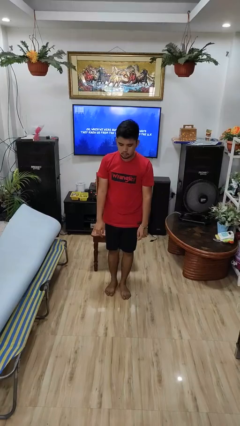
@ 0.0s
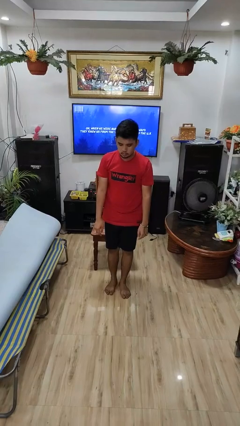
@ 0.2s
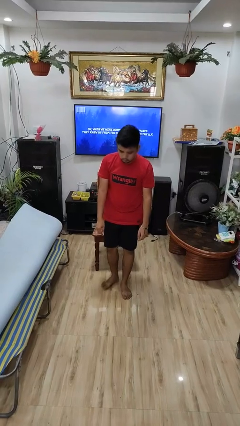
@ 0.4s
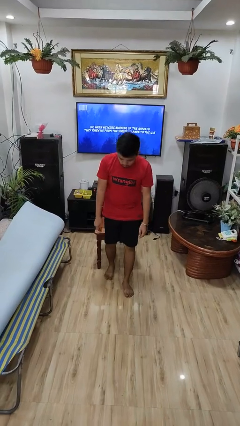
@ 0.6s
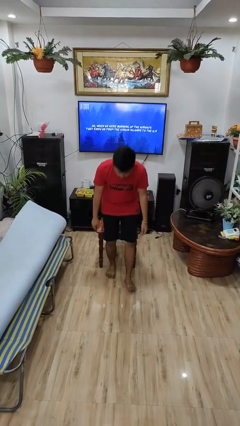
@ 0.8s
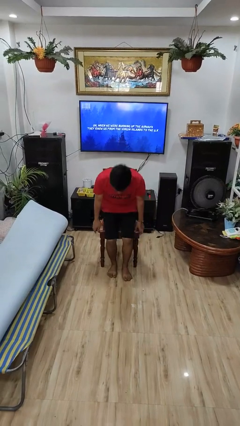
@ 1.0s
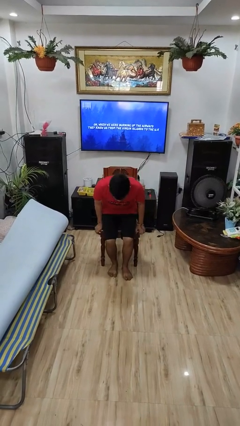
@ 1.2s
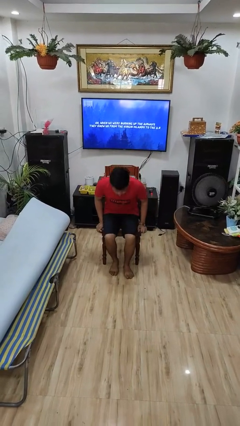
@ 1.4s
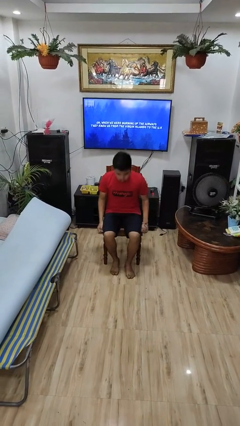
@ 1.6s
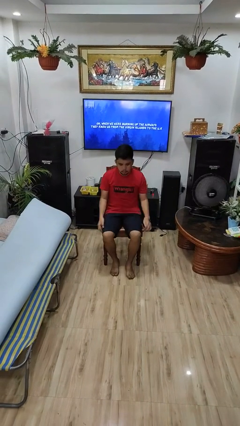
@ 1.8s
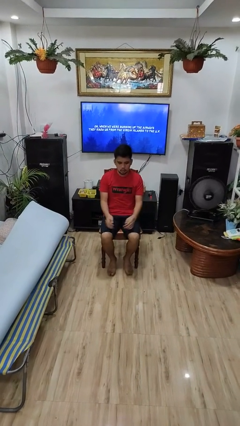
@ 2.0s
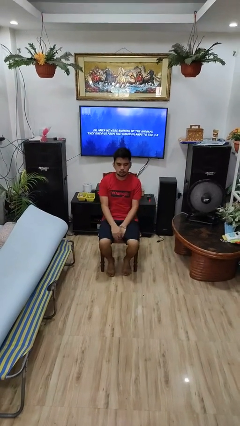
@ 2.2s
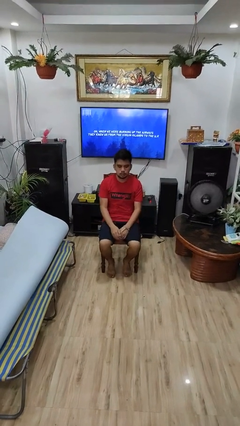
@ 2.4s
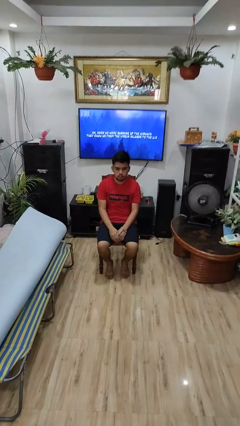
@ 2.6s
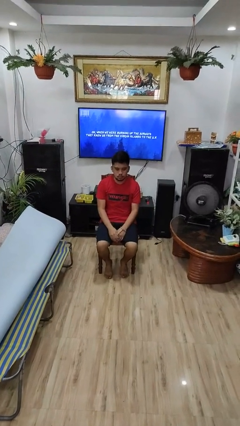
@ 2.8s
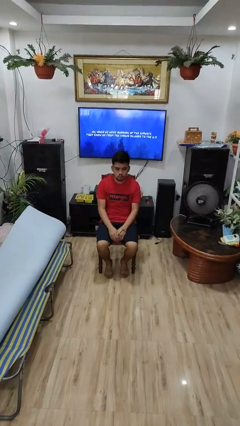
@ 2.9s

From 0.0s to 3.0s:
person sits down

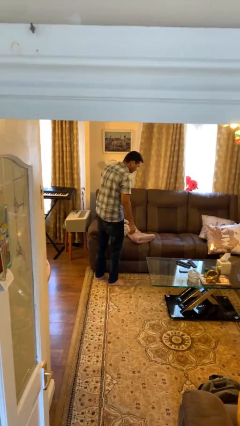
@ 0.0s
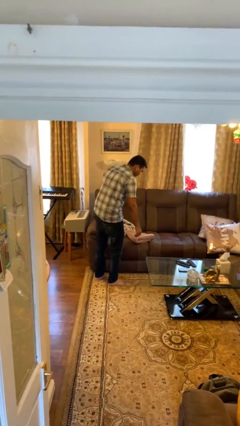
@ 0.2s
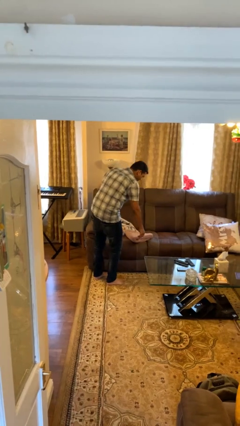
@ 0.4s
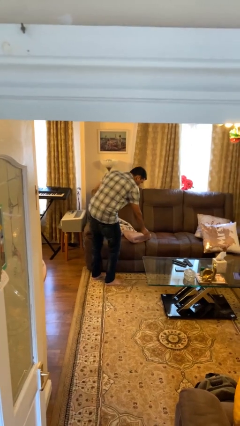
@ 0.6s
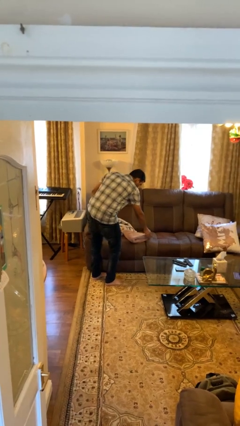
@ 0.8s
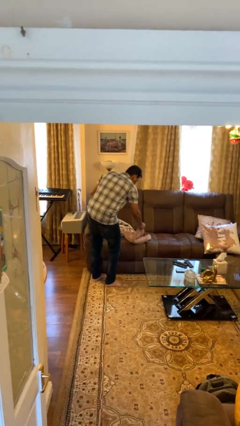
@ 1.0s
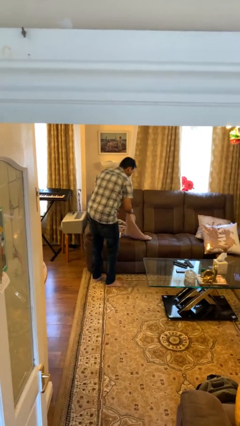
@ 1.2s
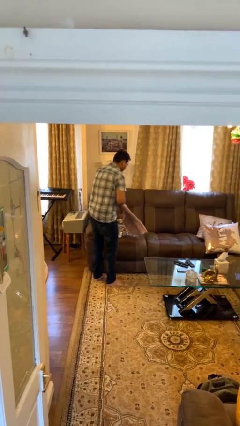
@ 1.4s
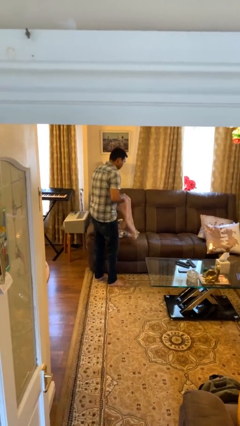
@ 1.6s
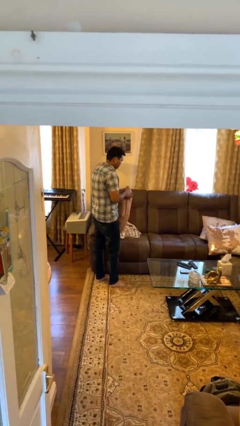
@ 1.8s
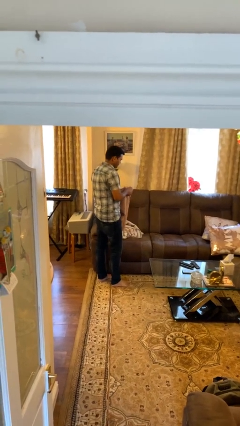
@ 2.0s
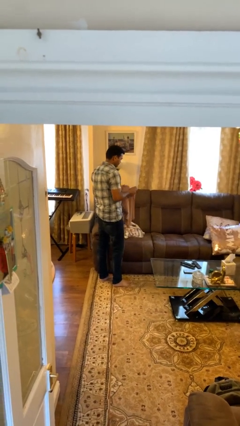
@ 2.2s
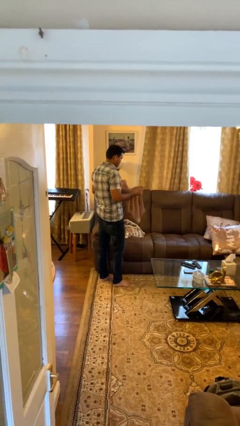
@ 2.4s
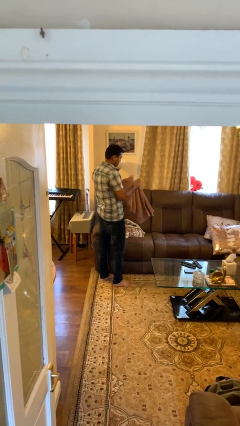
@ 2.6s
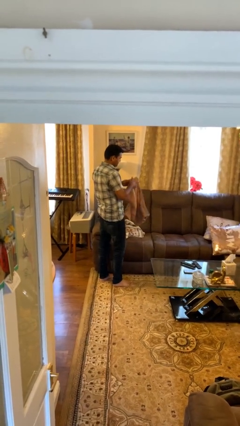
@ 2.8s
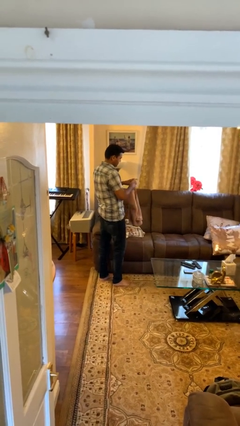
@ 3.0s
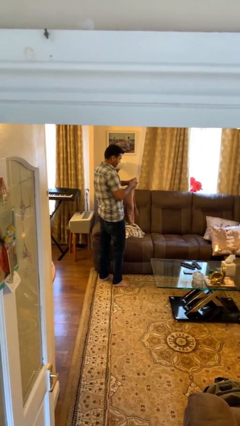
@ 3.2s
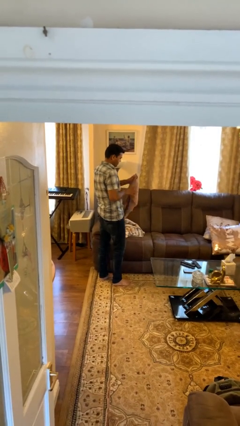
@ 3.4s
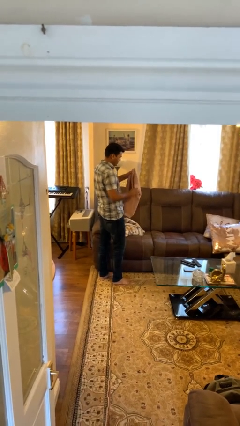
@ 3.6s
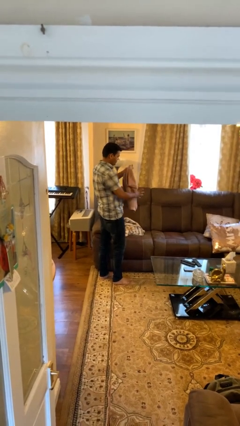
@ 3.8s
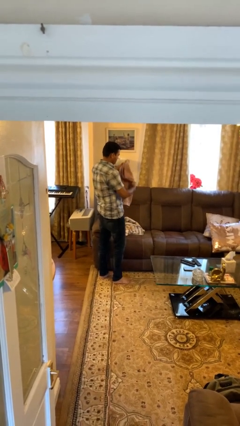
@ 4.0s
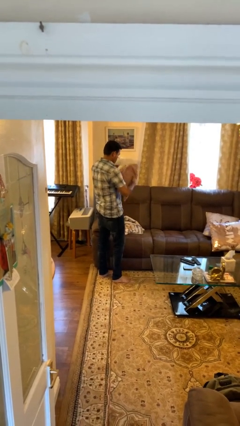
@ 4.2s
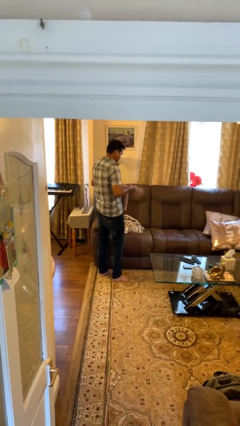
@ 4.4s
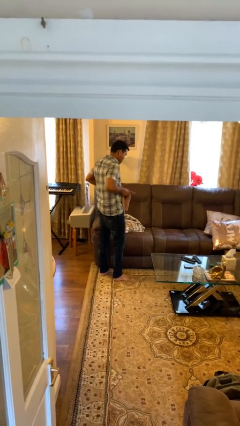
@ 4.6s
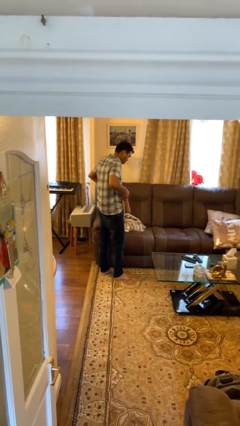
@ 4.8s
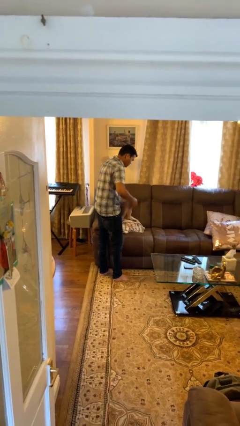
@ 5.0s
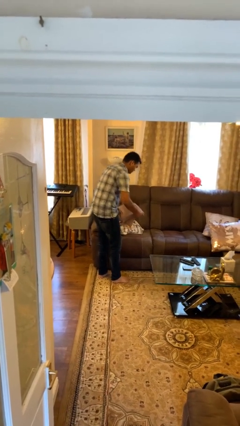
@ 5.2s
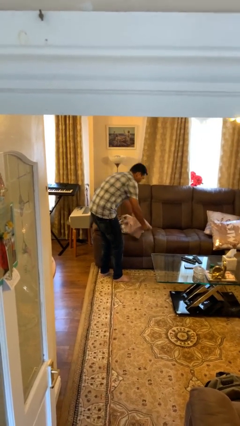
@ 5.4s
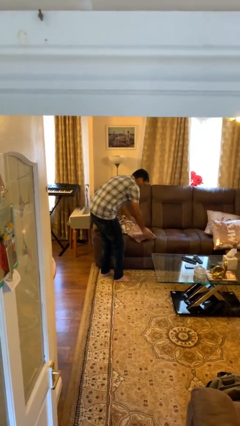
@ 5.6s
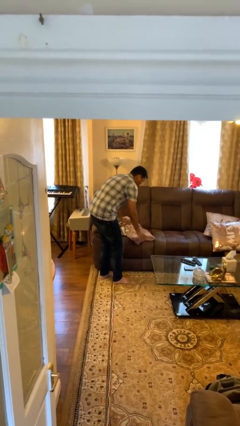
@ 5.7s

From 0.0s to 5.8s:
person folds towel

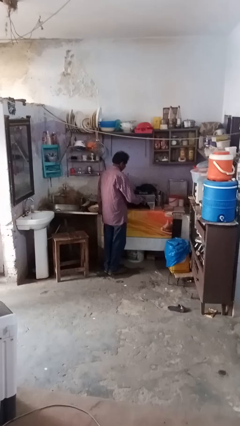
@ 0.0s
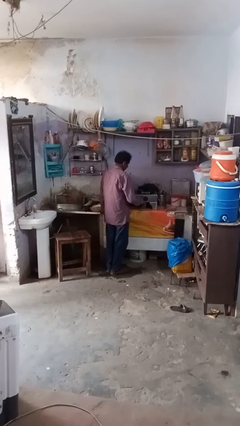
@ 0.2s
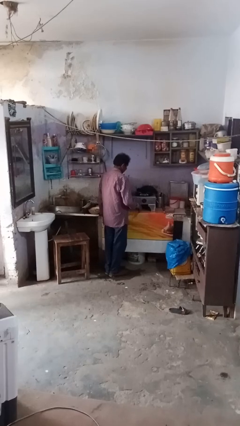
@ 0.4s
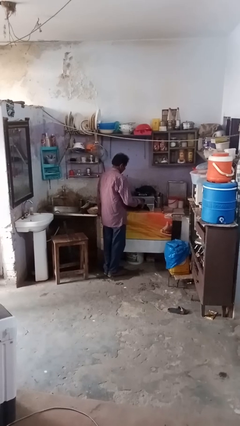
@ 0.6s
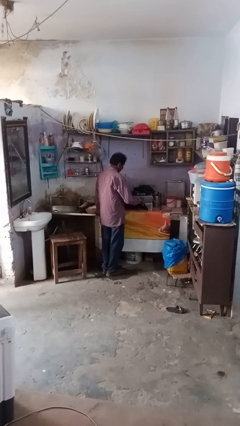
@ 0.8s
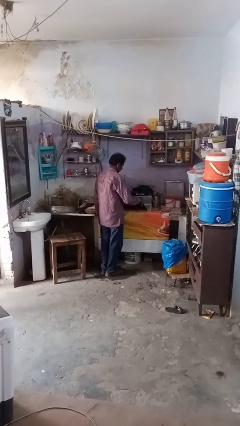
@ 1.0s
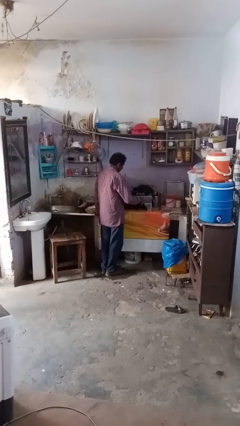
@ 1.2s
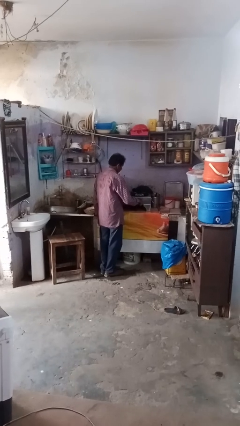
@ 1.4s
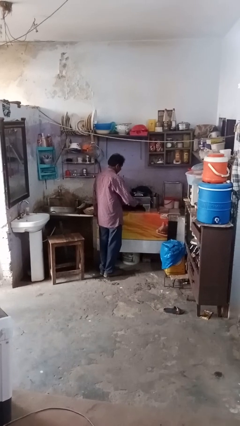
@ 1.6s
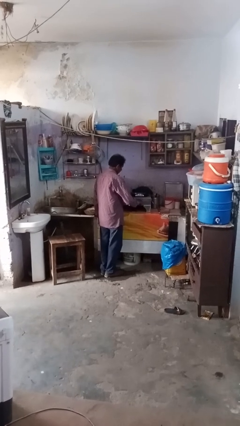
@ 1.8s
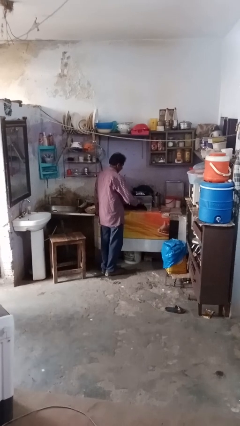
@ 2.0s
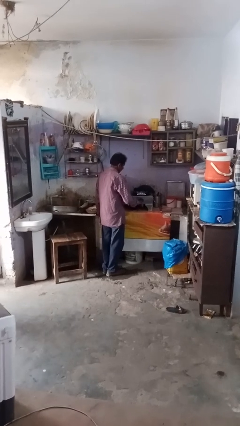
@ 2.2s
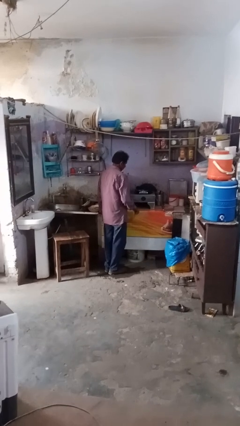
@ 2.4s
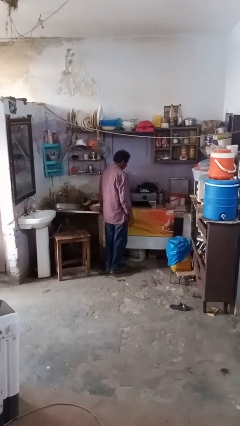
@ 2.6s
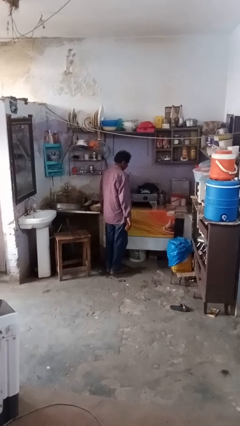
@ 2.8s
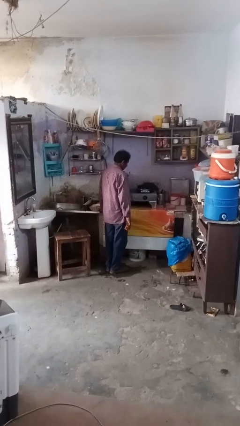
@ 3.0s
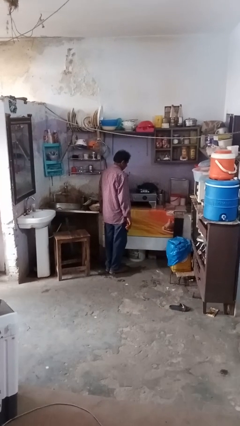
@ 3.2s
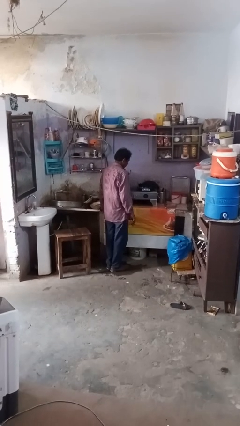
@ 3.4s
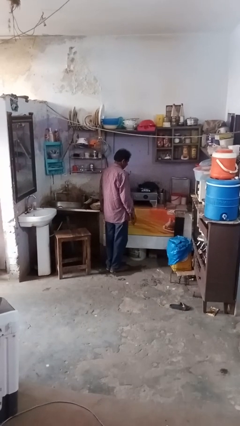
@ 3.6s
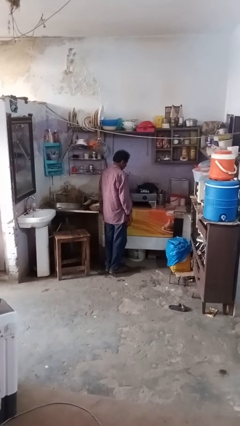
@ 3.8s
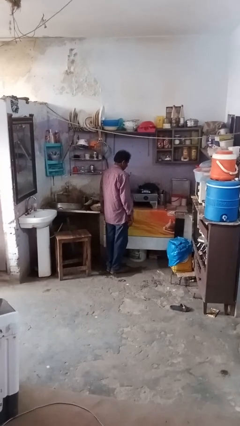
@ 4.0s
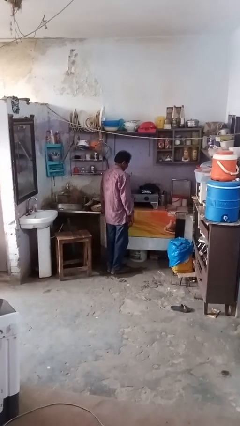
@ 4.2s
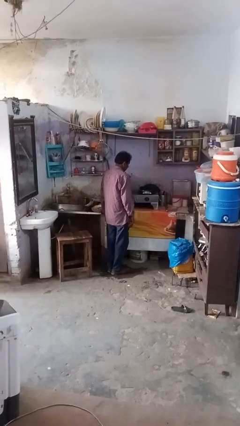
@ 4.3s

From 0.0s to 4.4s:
person turns on stovetop

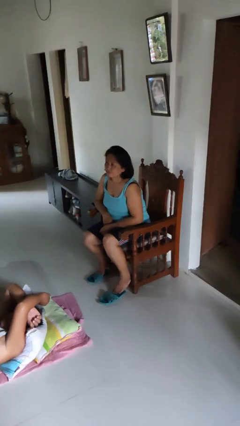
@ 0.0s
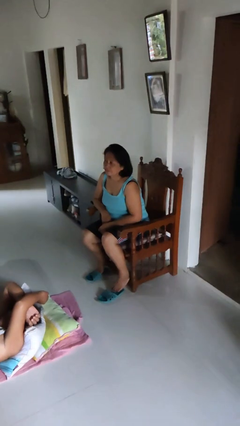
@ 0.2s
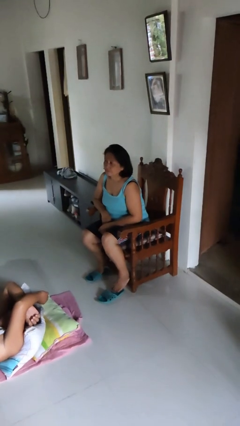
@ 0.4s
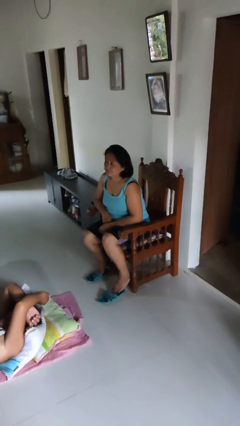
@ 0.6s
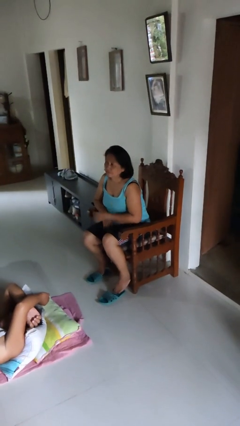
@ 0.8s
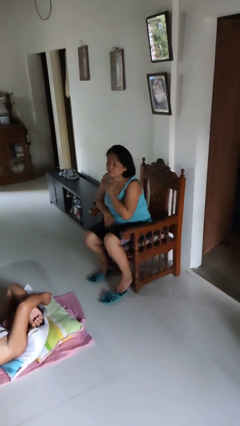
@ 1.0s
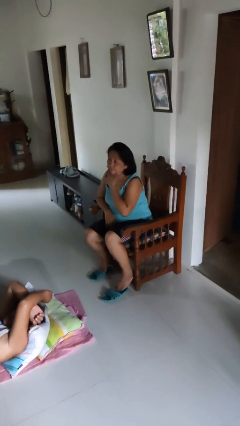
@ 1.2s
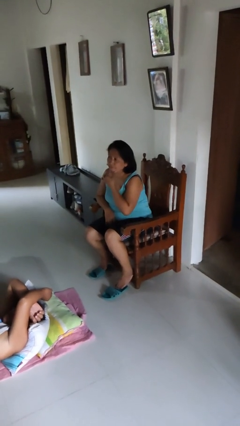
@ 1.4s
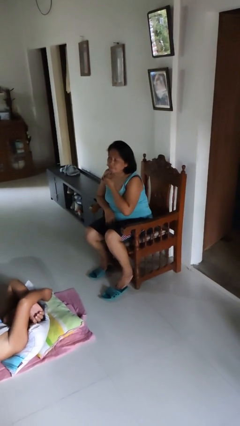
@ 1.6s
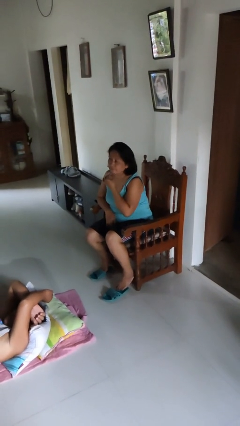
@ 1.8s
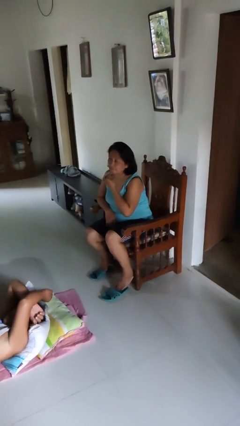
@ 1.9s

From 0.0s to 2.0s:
person strokes chin

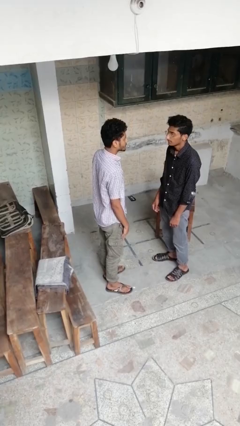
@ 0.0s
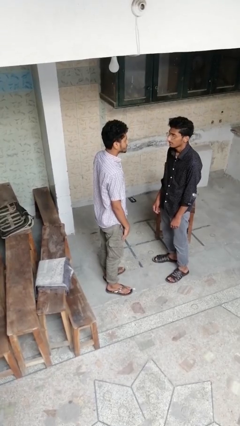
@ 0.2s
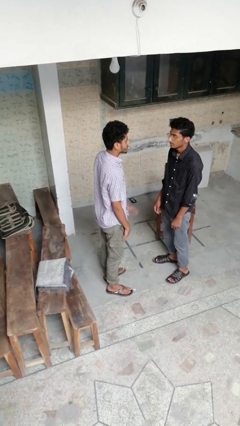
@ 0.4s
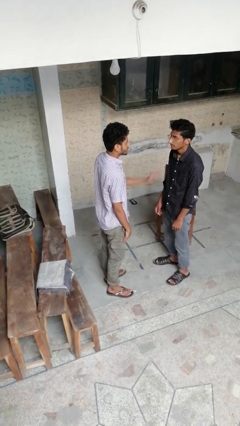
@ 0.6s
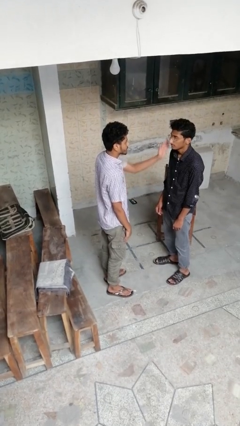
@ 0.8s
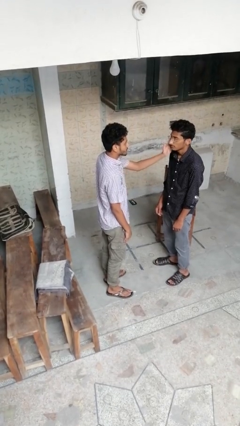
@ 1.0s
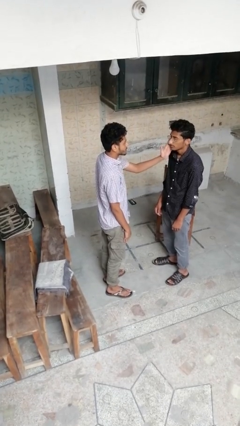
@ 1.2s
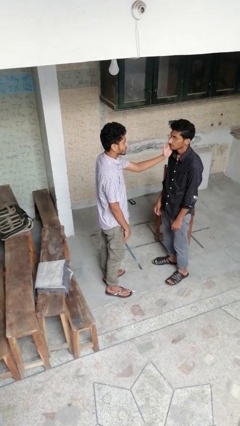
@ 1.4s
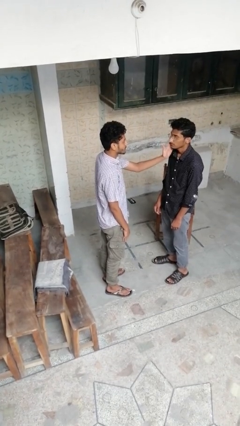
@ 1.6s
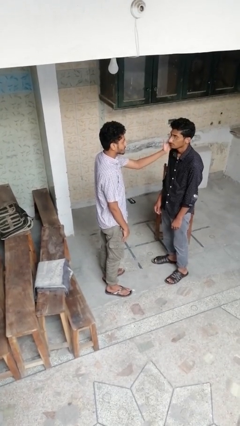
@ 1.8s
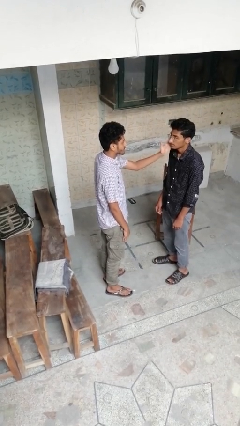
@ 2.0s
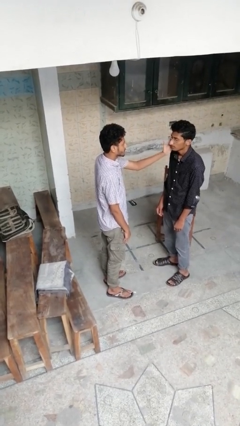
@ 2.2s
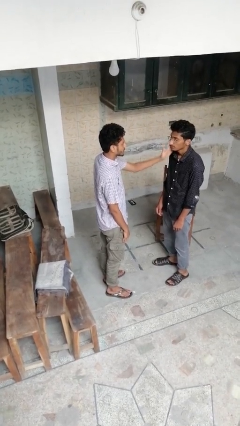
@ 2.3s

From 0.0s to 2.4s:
person touches face of person
